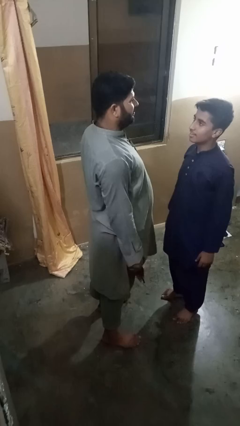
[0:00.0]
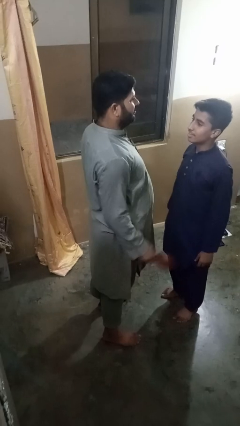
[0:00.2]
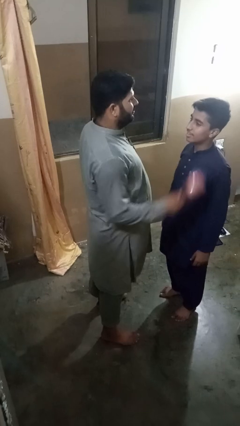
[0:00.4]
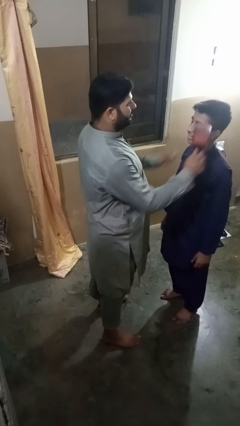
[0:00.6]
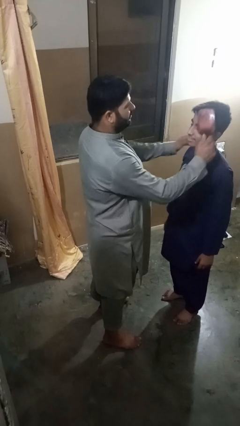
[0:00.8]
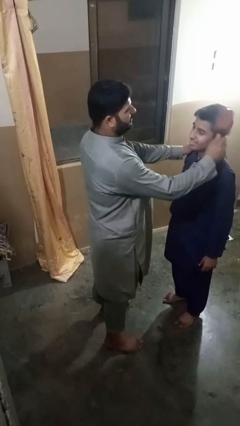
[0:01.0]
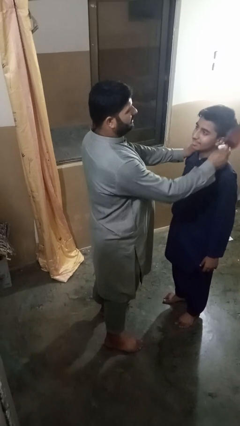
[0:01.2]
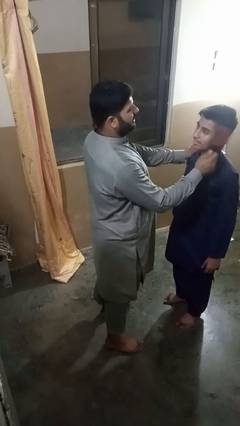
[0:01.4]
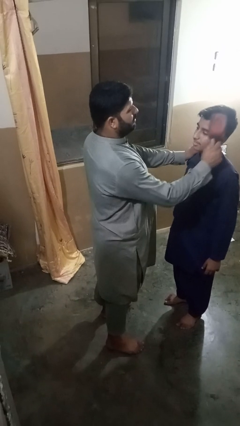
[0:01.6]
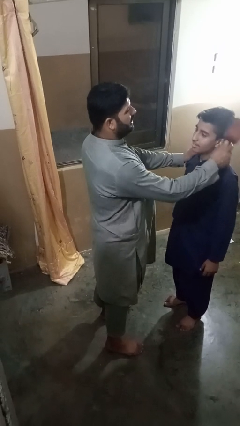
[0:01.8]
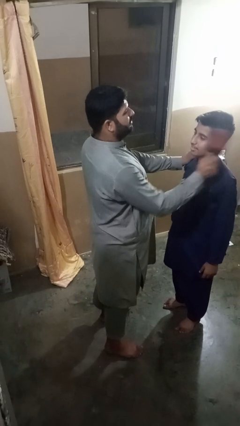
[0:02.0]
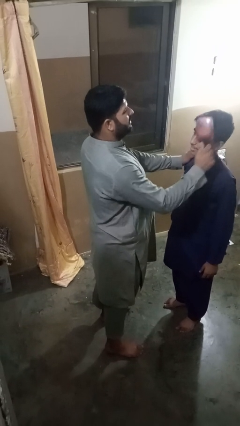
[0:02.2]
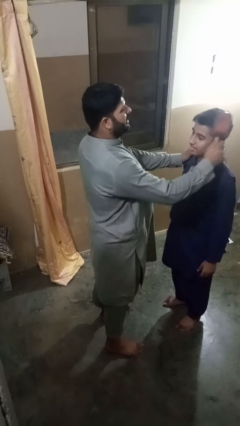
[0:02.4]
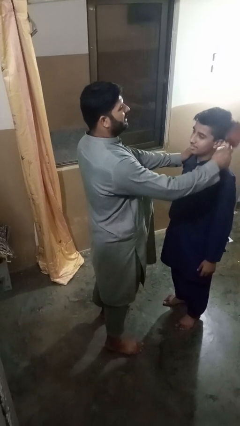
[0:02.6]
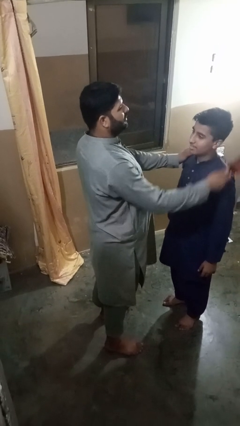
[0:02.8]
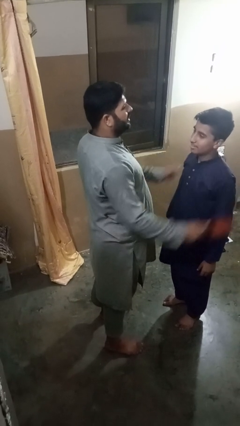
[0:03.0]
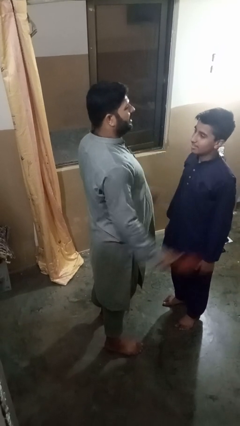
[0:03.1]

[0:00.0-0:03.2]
person brushes hair of person

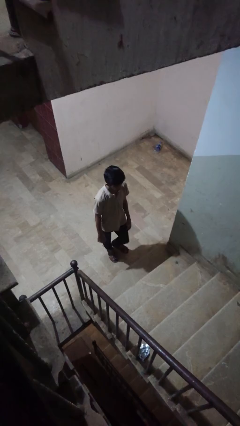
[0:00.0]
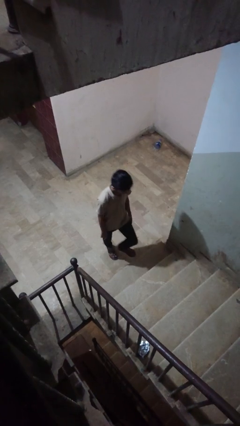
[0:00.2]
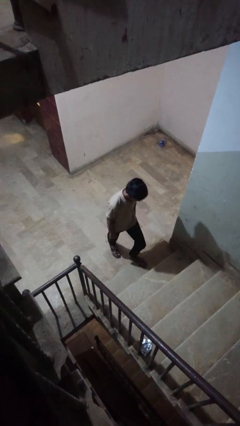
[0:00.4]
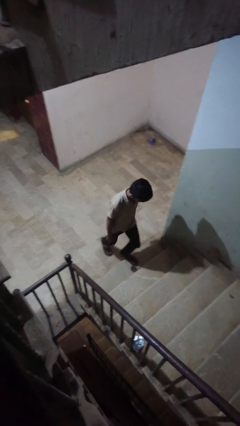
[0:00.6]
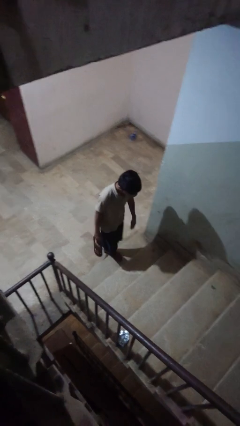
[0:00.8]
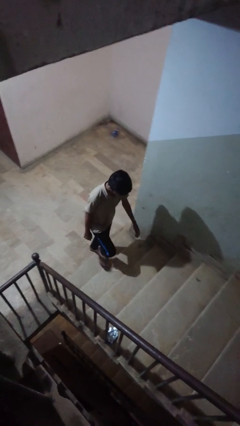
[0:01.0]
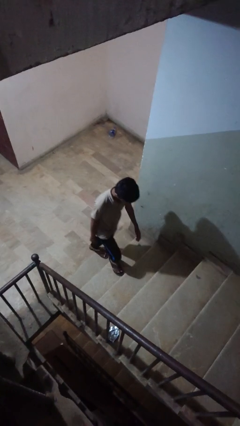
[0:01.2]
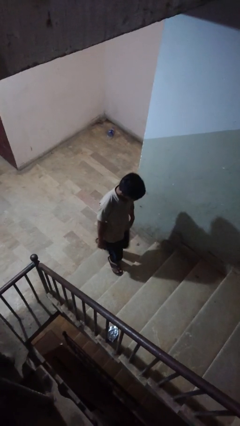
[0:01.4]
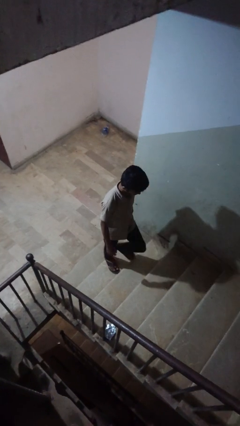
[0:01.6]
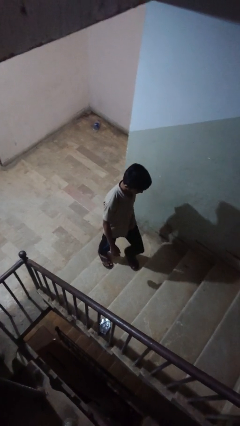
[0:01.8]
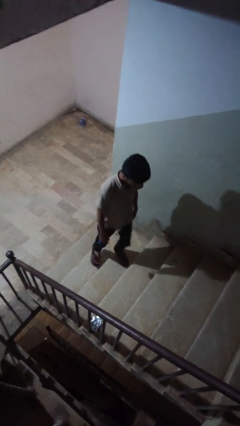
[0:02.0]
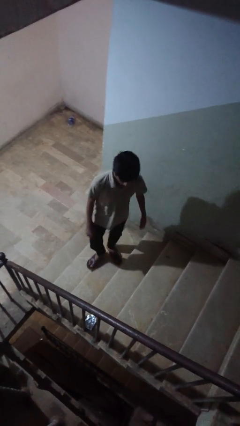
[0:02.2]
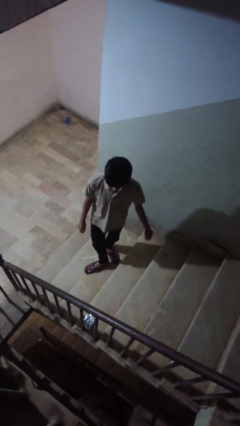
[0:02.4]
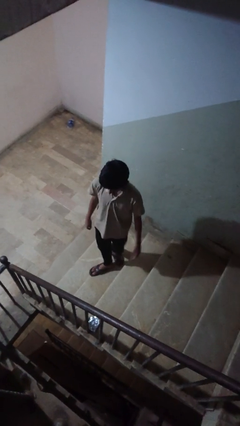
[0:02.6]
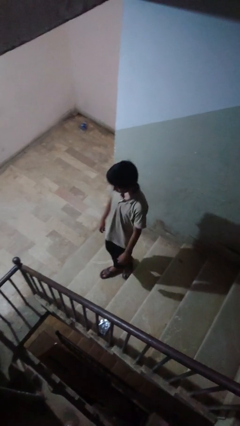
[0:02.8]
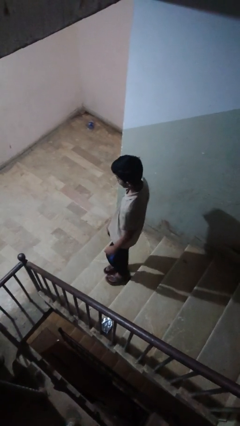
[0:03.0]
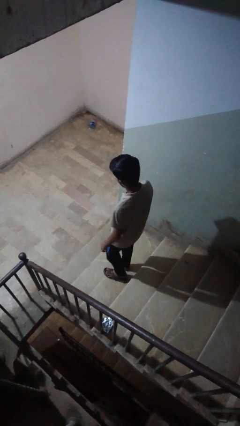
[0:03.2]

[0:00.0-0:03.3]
person climbs up stairs

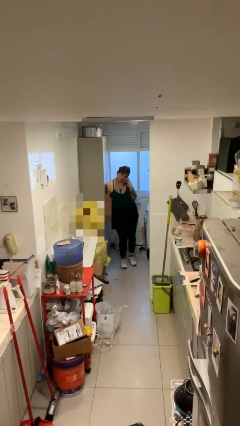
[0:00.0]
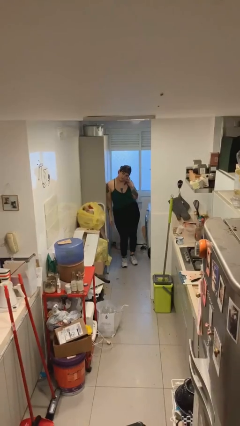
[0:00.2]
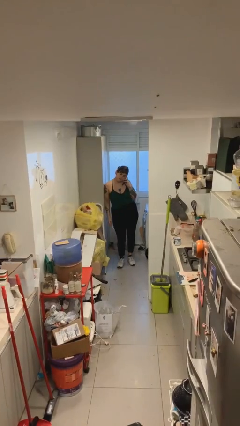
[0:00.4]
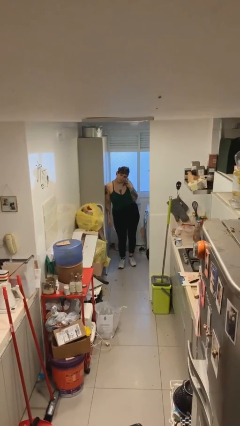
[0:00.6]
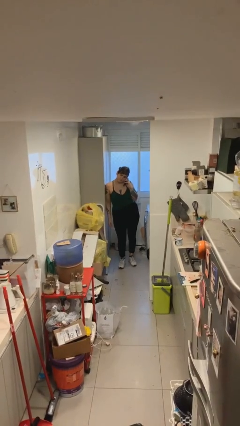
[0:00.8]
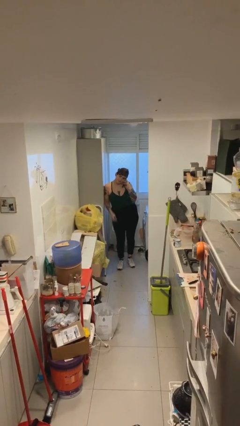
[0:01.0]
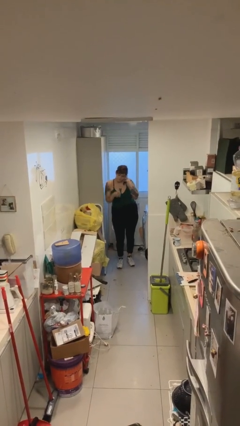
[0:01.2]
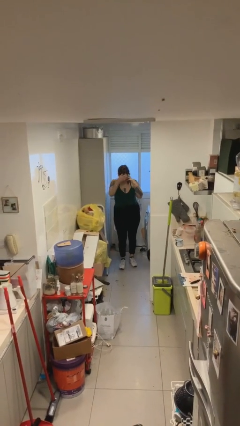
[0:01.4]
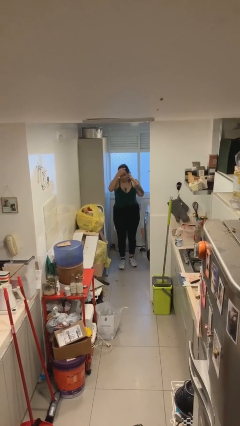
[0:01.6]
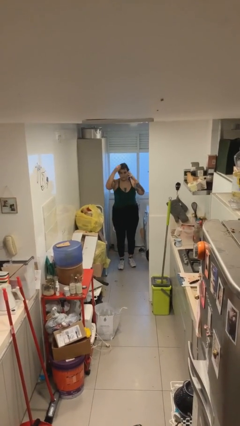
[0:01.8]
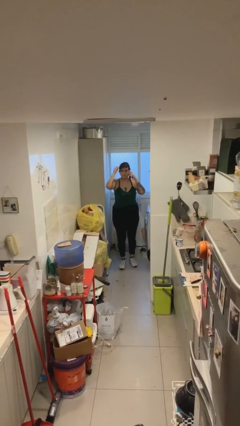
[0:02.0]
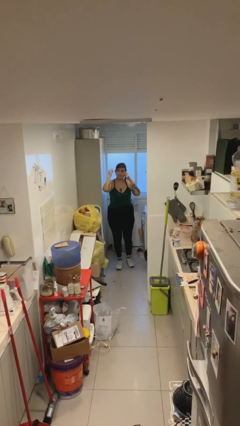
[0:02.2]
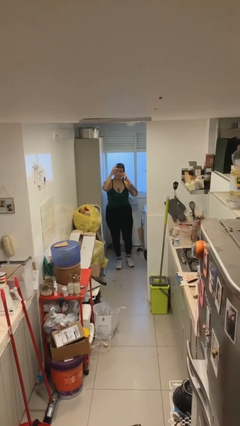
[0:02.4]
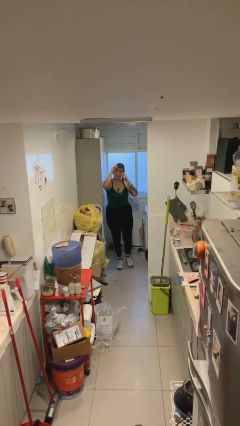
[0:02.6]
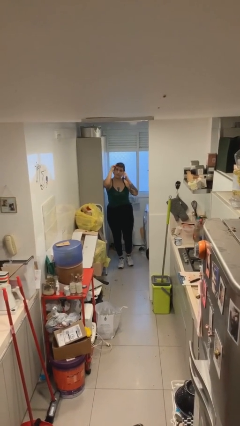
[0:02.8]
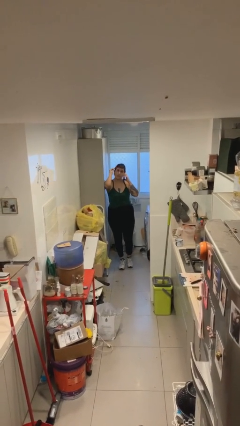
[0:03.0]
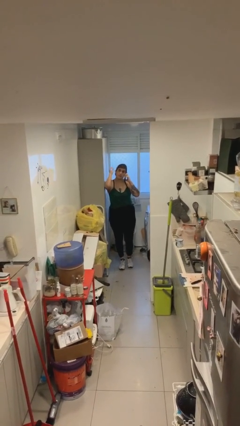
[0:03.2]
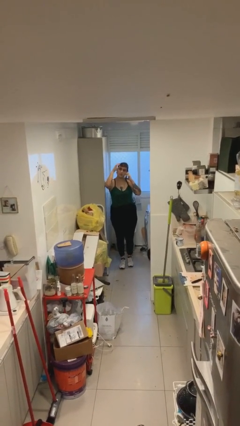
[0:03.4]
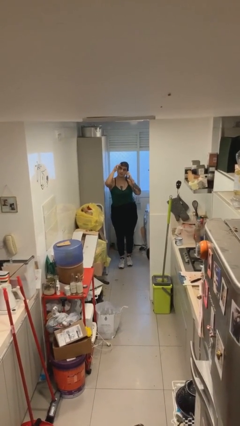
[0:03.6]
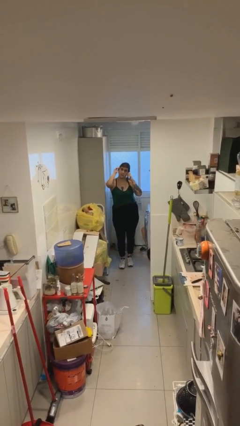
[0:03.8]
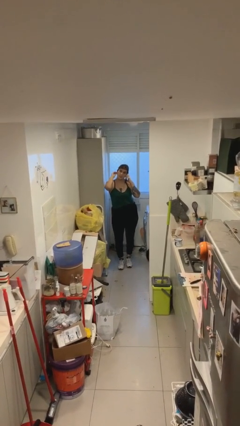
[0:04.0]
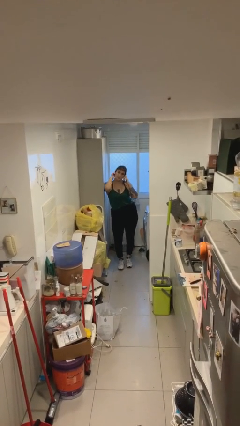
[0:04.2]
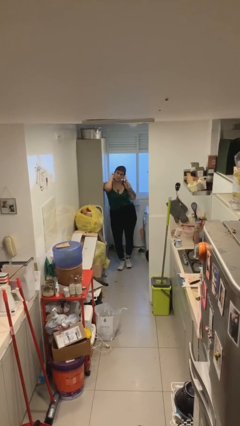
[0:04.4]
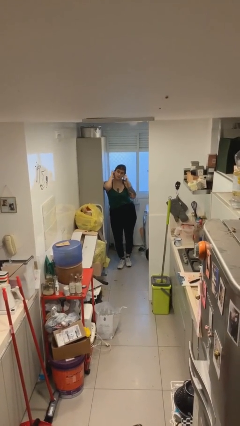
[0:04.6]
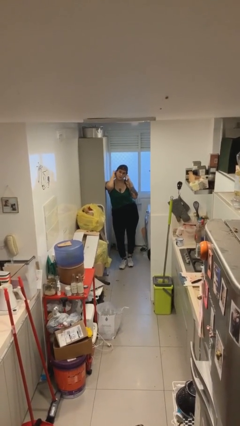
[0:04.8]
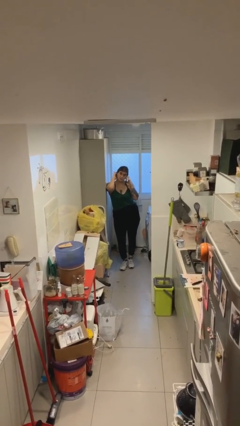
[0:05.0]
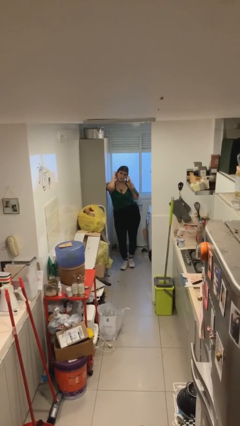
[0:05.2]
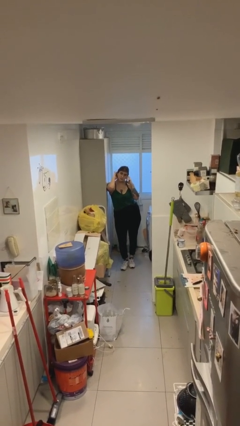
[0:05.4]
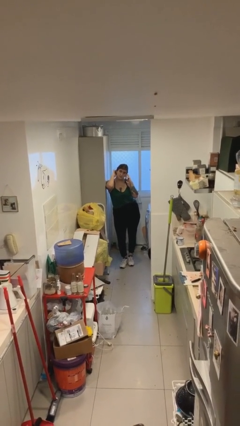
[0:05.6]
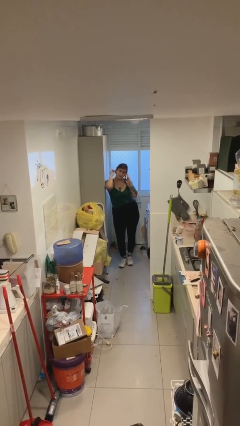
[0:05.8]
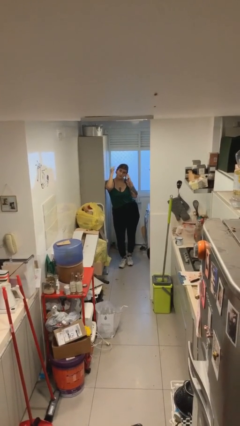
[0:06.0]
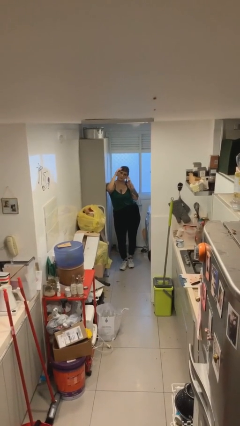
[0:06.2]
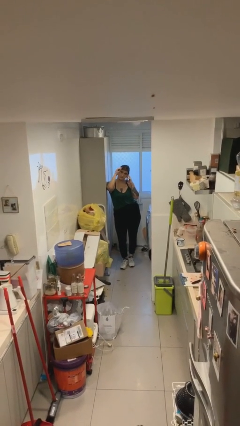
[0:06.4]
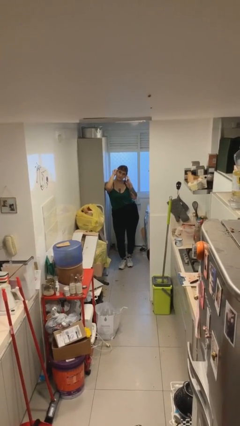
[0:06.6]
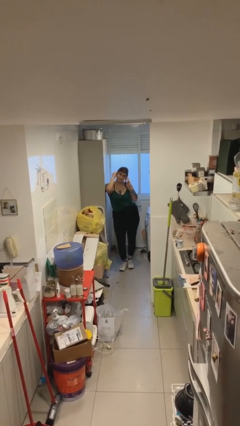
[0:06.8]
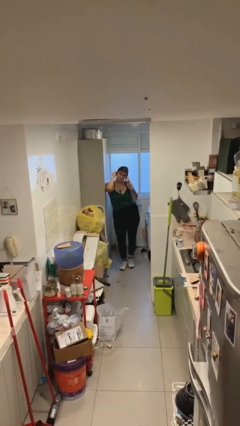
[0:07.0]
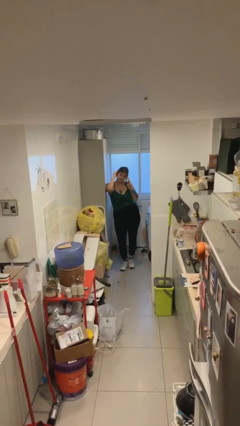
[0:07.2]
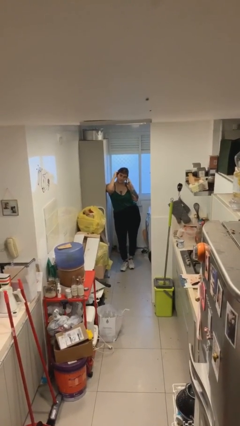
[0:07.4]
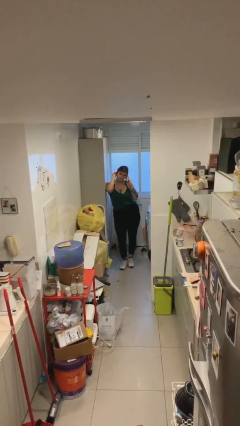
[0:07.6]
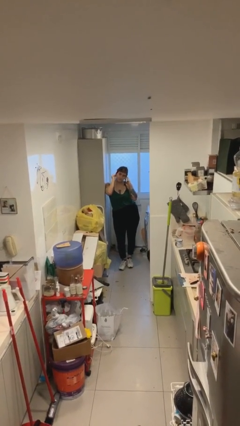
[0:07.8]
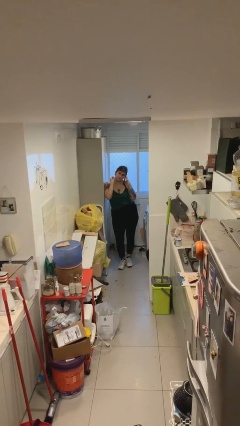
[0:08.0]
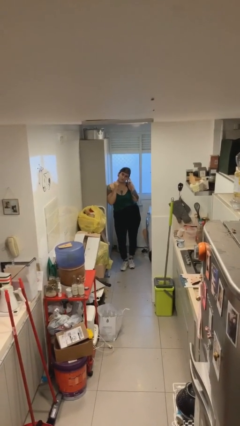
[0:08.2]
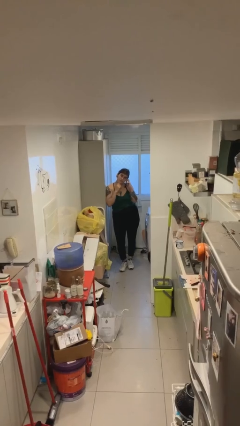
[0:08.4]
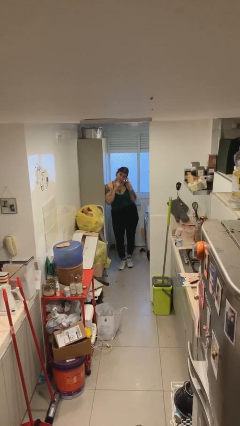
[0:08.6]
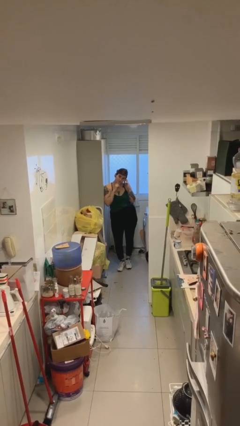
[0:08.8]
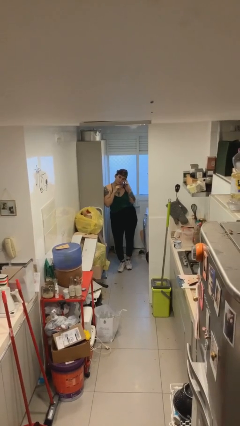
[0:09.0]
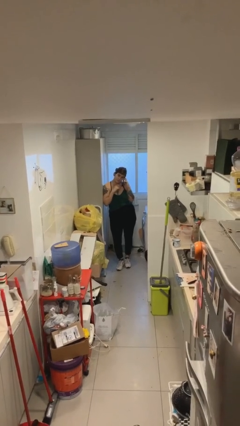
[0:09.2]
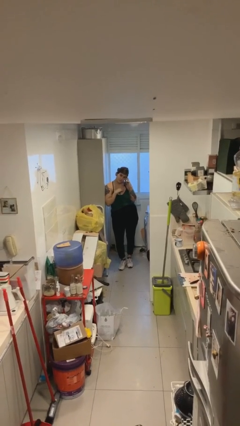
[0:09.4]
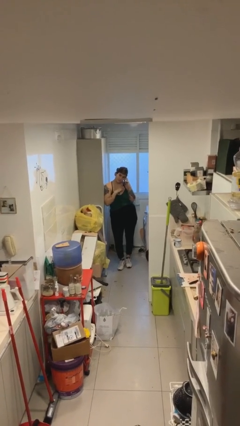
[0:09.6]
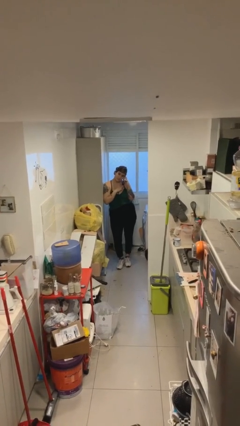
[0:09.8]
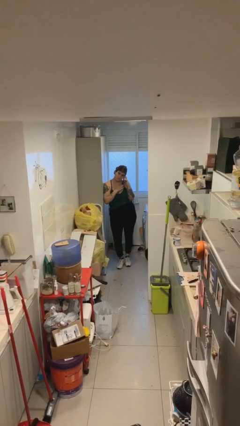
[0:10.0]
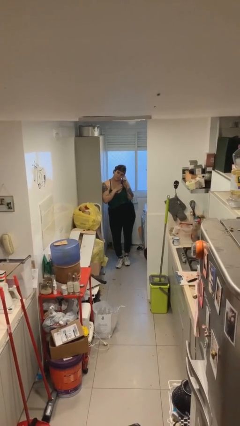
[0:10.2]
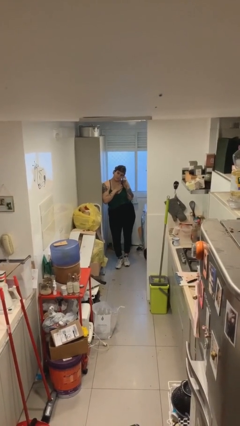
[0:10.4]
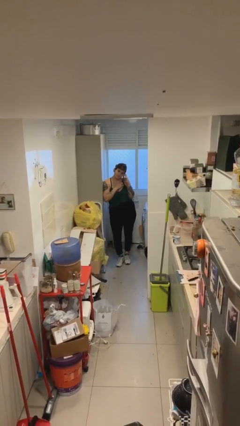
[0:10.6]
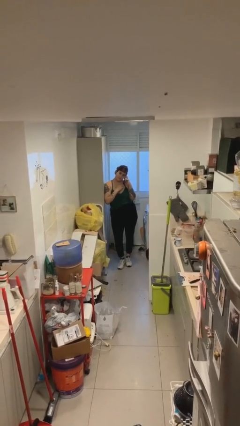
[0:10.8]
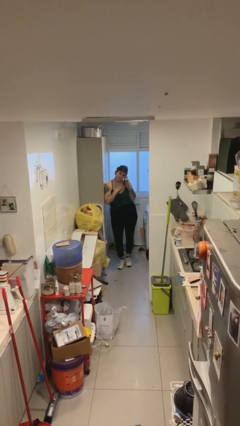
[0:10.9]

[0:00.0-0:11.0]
person talks on phone

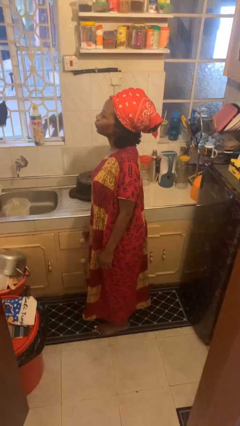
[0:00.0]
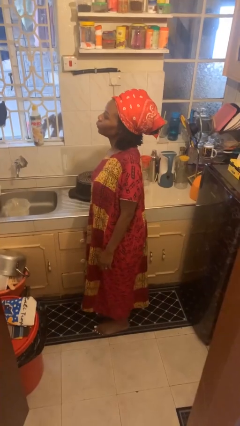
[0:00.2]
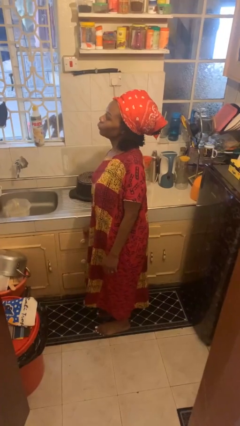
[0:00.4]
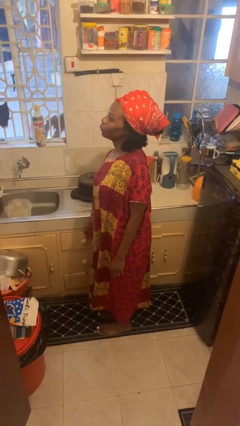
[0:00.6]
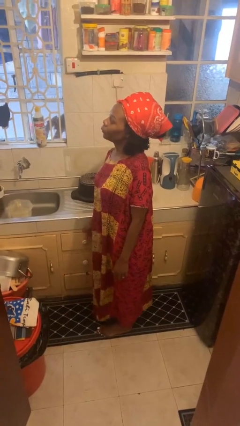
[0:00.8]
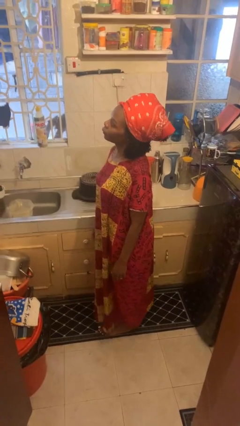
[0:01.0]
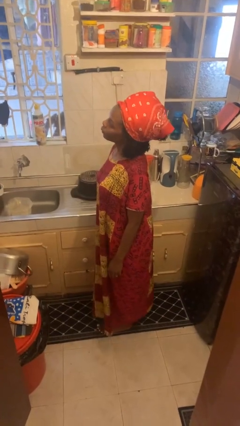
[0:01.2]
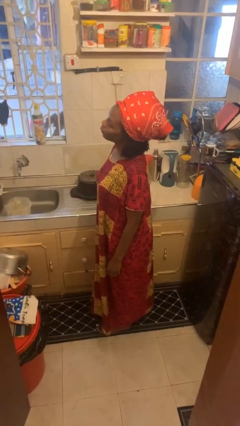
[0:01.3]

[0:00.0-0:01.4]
person closes kitchen drawer
